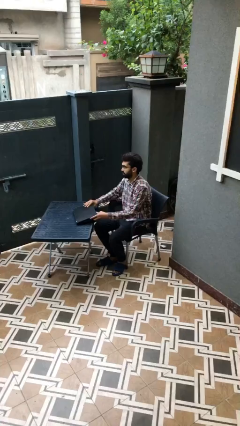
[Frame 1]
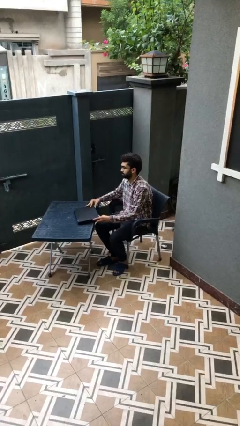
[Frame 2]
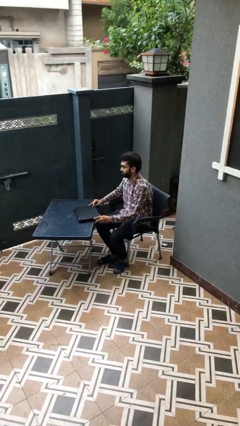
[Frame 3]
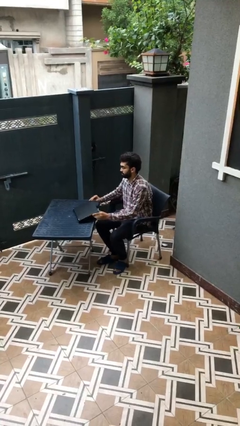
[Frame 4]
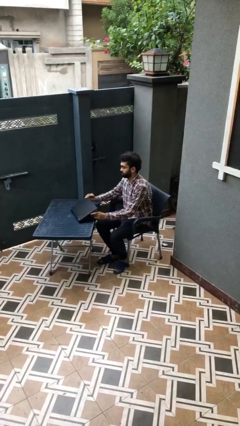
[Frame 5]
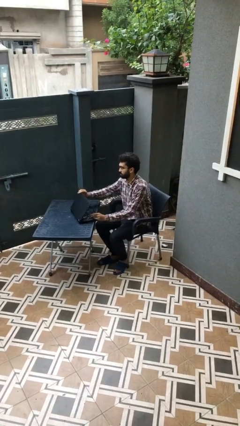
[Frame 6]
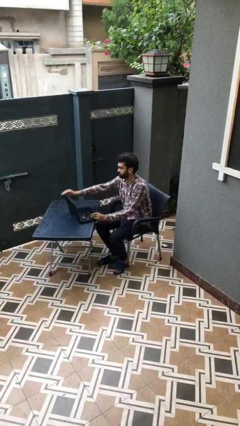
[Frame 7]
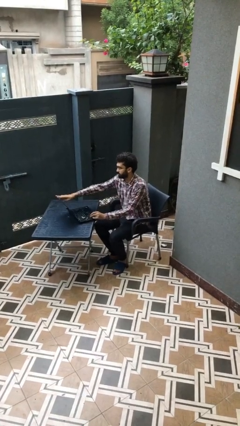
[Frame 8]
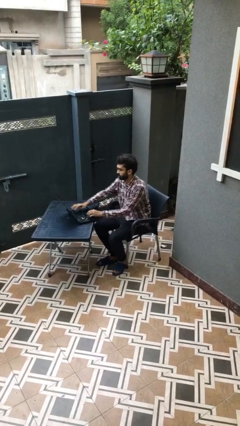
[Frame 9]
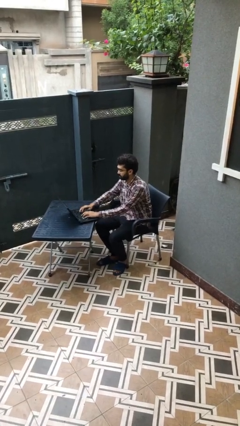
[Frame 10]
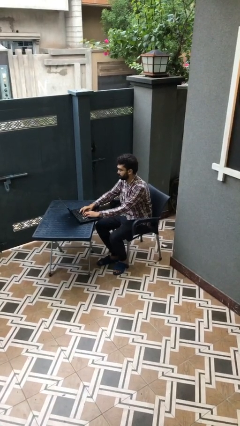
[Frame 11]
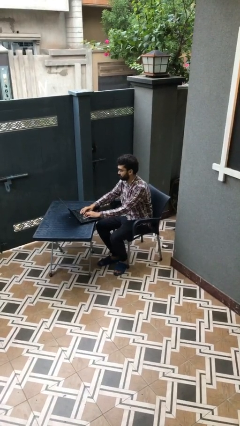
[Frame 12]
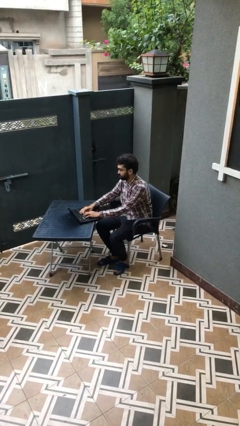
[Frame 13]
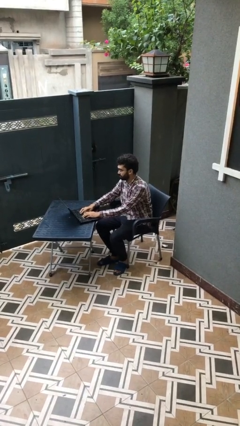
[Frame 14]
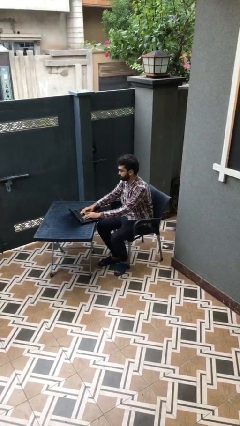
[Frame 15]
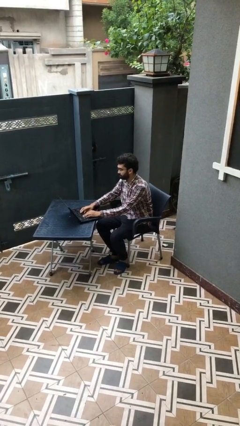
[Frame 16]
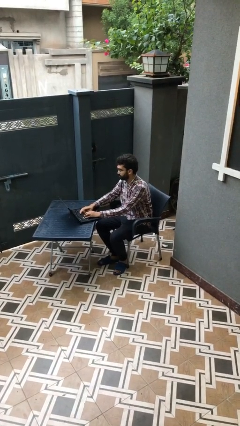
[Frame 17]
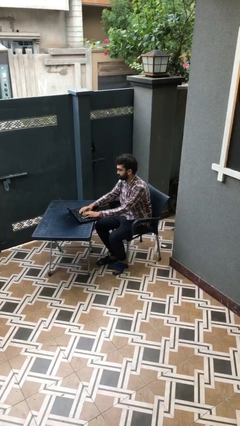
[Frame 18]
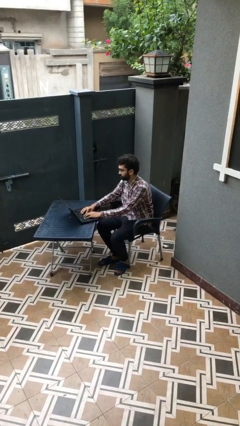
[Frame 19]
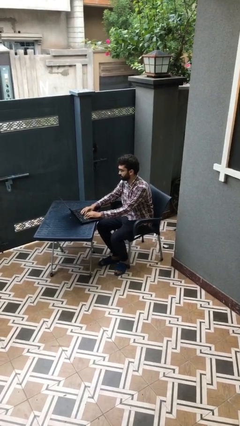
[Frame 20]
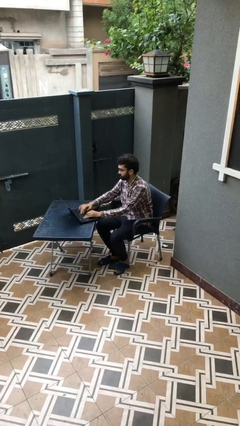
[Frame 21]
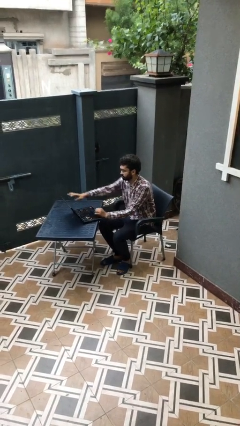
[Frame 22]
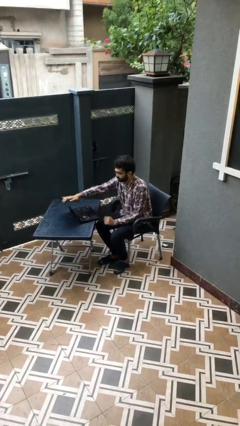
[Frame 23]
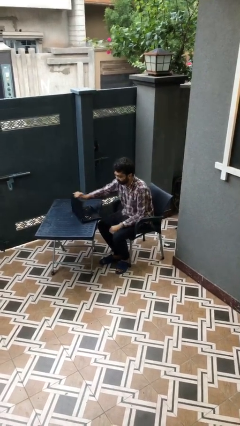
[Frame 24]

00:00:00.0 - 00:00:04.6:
person interacts with laptop

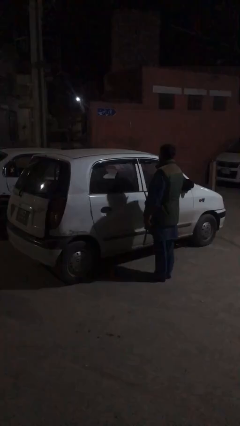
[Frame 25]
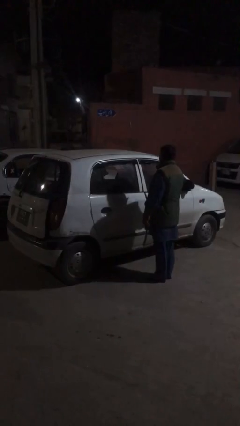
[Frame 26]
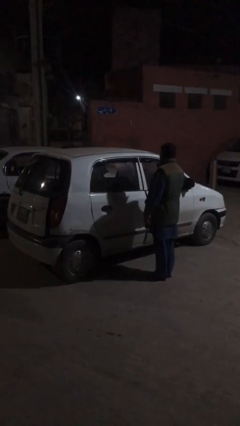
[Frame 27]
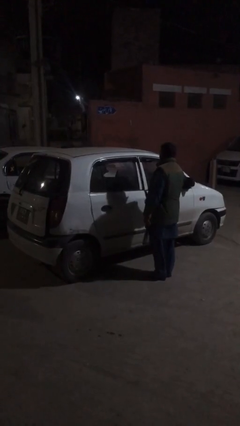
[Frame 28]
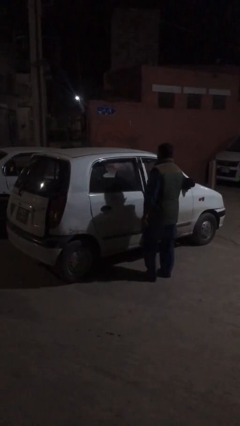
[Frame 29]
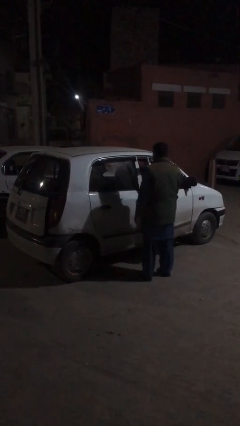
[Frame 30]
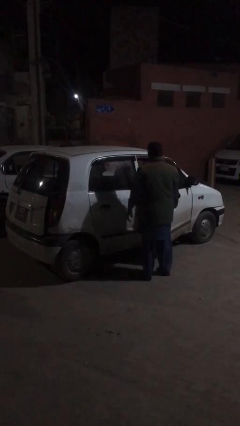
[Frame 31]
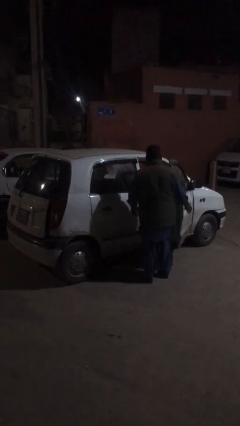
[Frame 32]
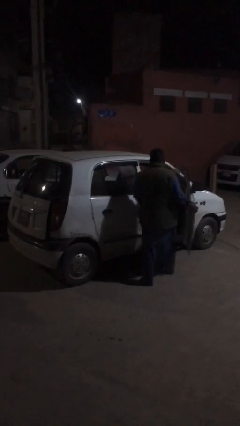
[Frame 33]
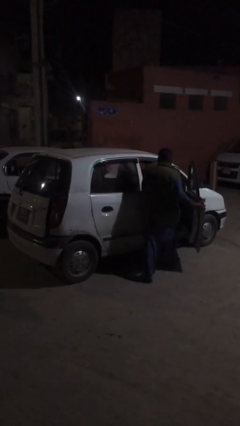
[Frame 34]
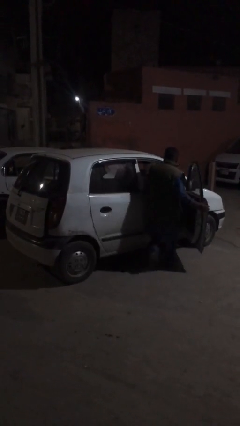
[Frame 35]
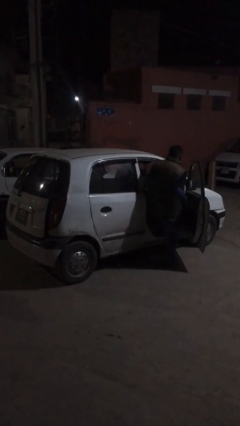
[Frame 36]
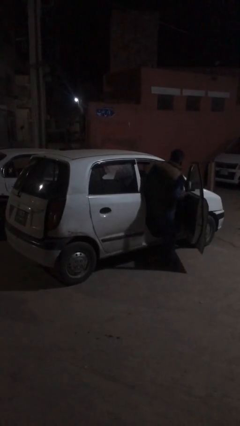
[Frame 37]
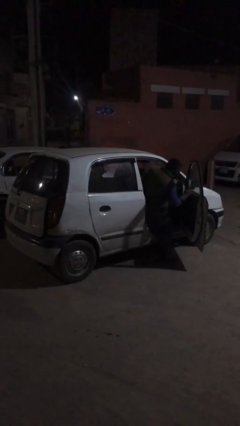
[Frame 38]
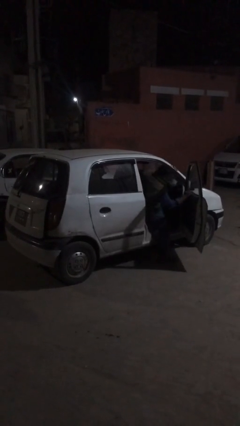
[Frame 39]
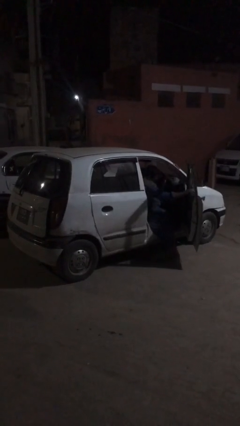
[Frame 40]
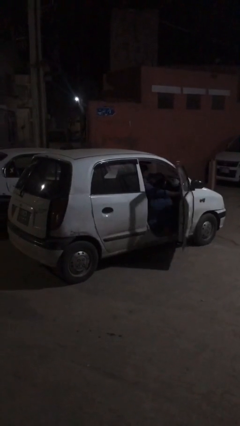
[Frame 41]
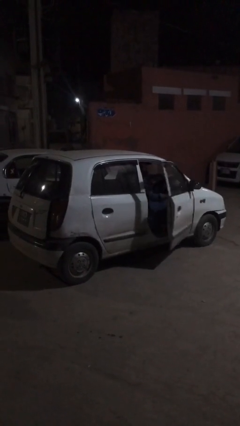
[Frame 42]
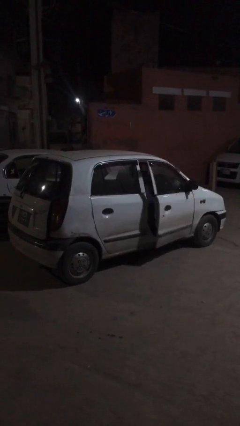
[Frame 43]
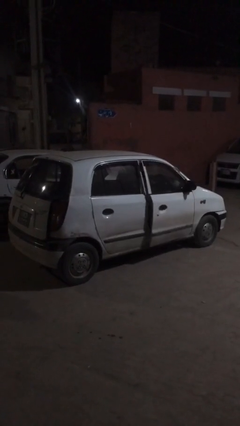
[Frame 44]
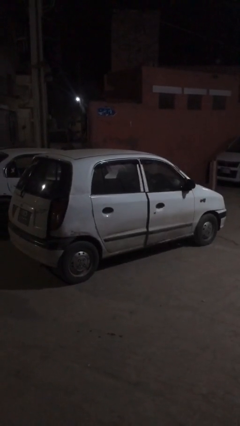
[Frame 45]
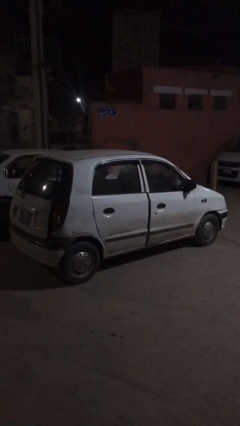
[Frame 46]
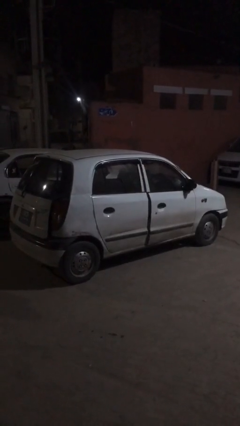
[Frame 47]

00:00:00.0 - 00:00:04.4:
car picks up person

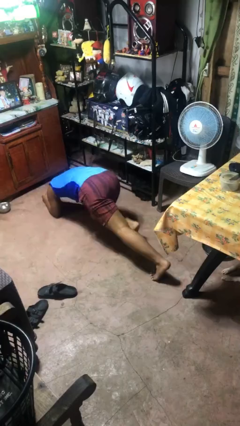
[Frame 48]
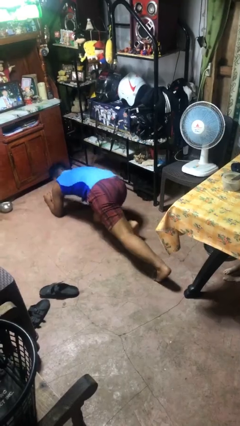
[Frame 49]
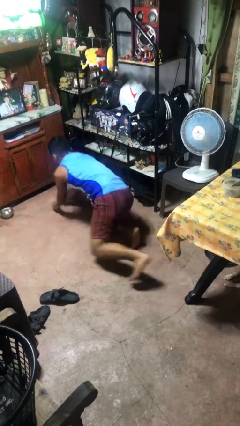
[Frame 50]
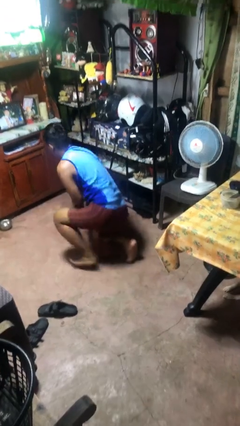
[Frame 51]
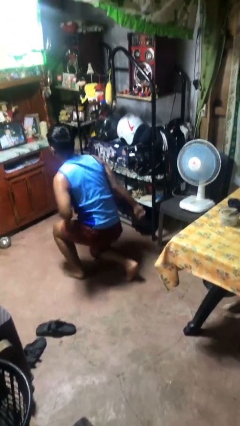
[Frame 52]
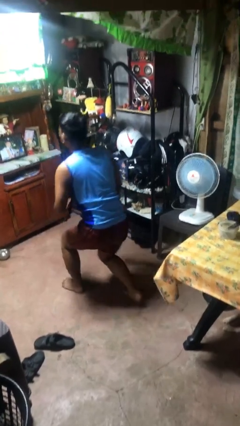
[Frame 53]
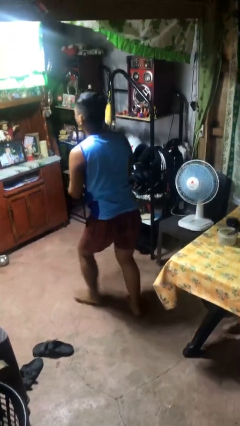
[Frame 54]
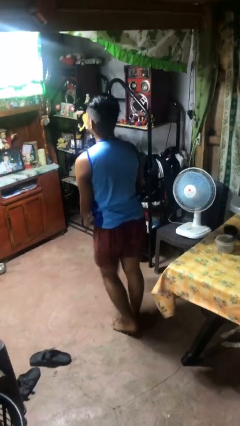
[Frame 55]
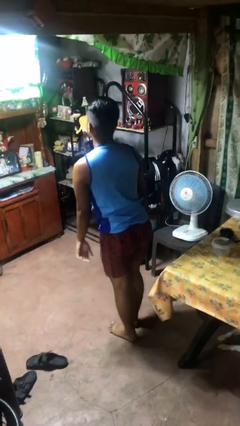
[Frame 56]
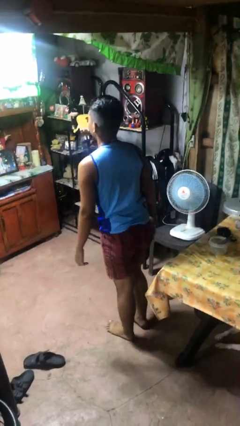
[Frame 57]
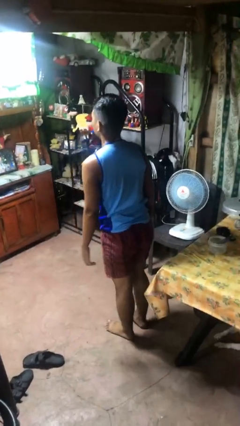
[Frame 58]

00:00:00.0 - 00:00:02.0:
person stands up from floor

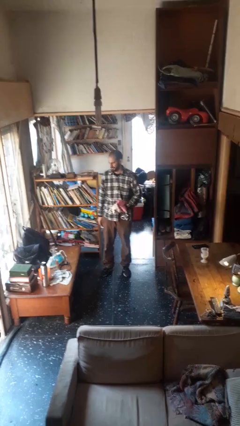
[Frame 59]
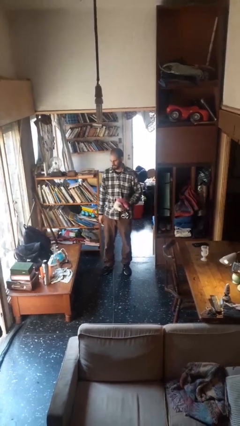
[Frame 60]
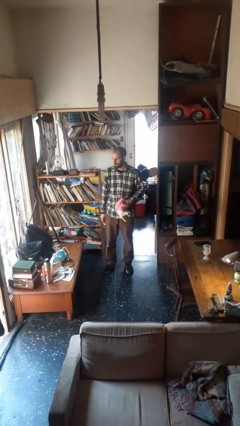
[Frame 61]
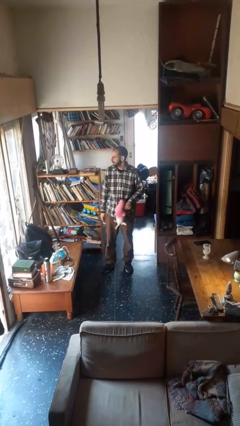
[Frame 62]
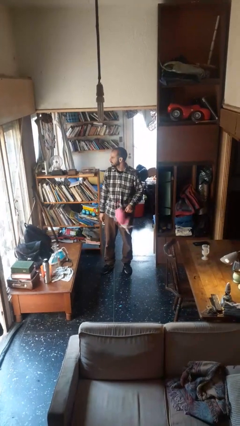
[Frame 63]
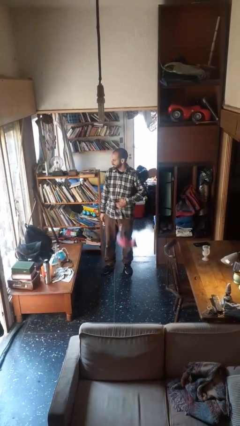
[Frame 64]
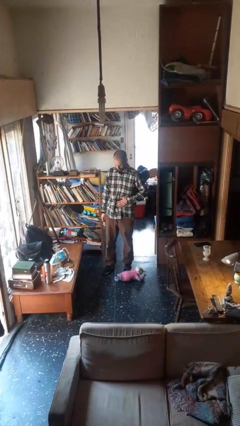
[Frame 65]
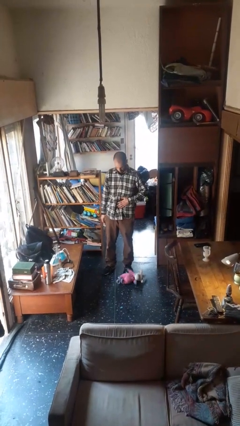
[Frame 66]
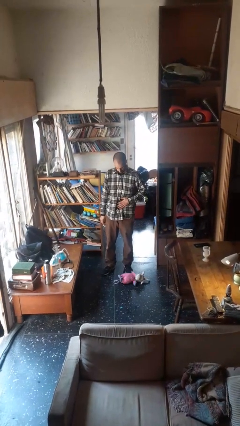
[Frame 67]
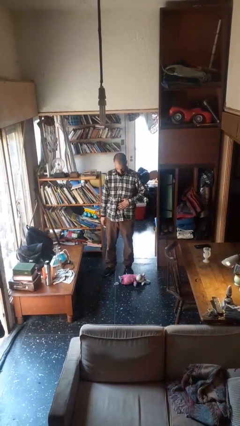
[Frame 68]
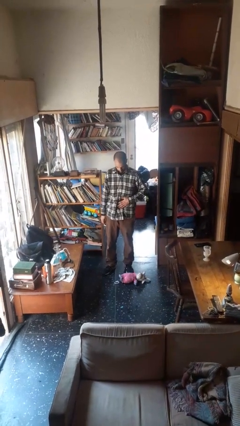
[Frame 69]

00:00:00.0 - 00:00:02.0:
person drops object

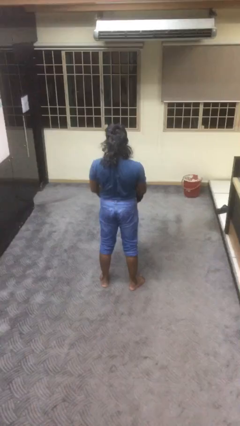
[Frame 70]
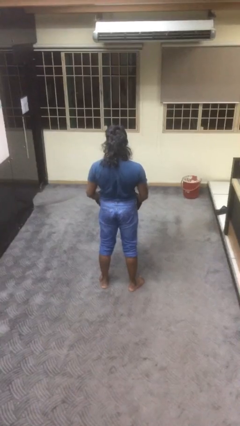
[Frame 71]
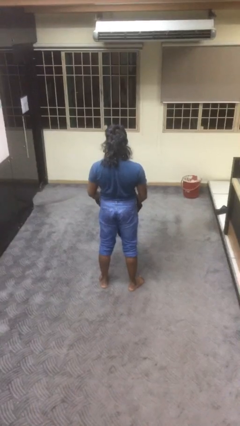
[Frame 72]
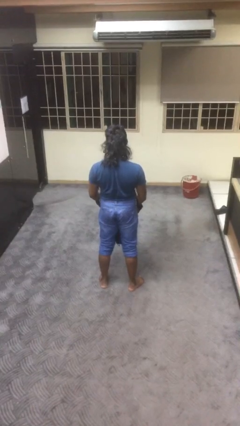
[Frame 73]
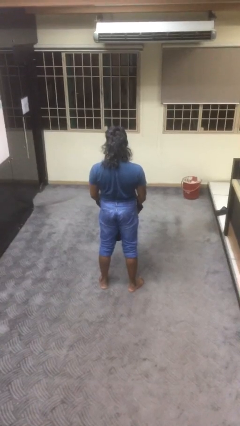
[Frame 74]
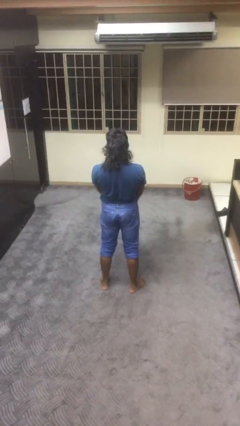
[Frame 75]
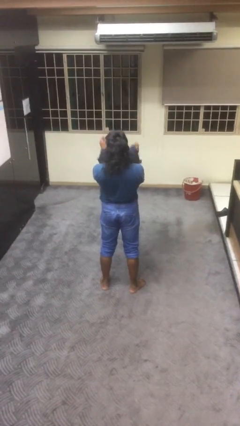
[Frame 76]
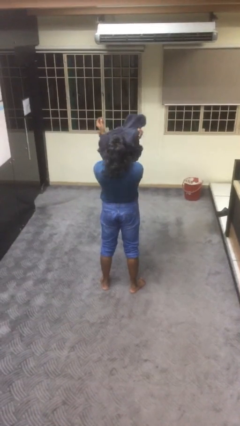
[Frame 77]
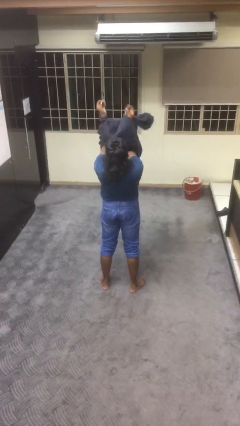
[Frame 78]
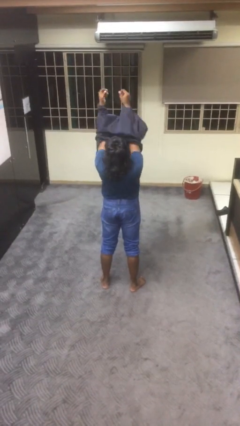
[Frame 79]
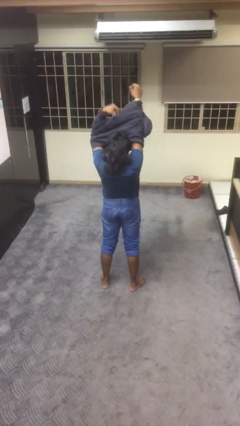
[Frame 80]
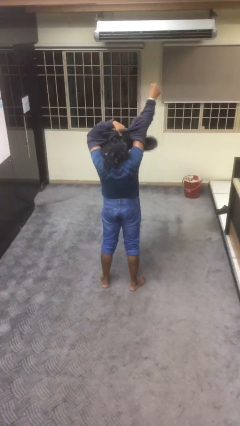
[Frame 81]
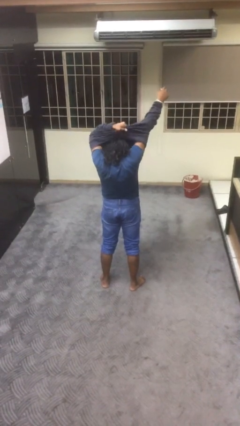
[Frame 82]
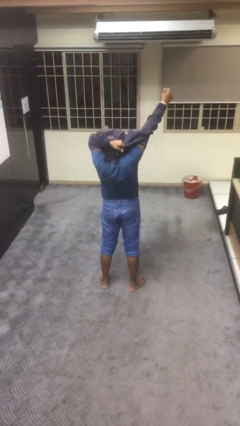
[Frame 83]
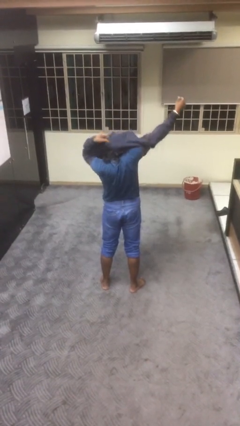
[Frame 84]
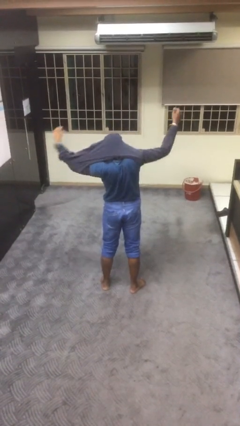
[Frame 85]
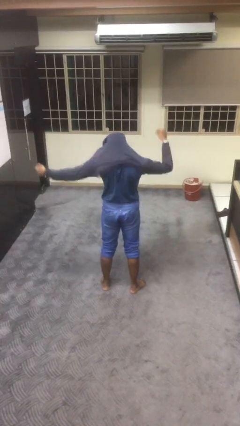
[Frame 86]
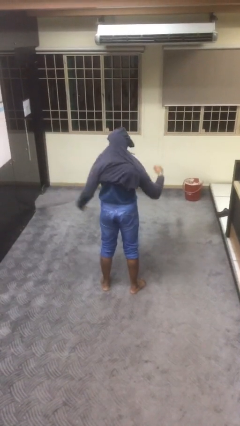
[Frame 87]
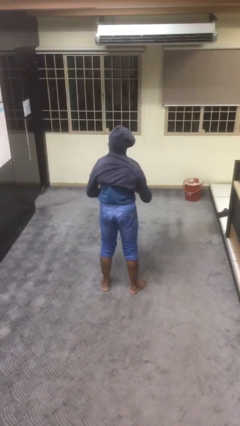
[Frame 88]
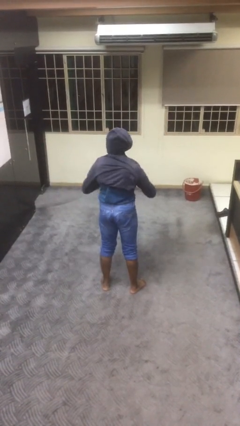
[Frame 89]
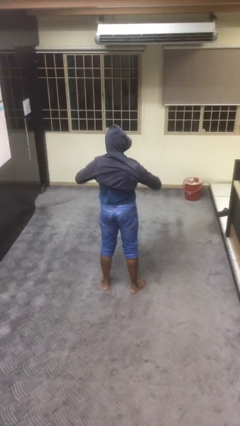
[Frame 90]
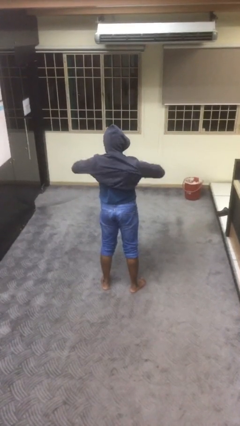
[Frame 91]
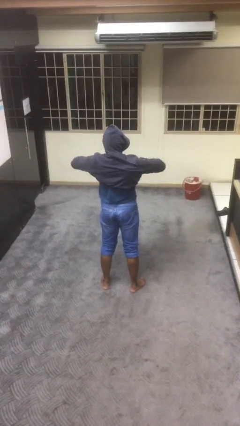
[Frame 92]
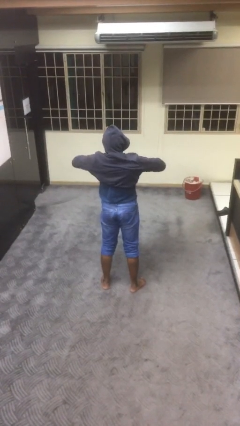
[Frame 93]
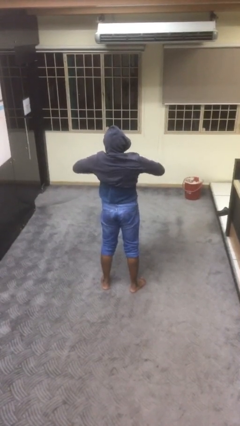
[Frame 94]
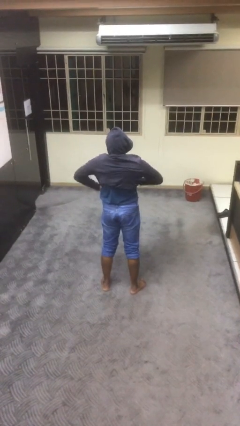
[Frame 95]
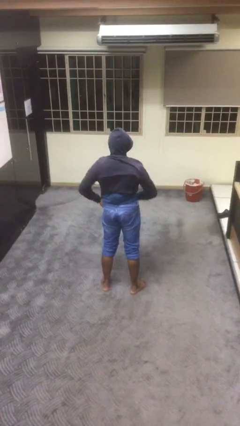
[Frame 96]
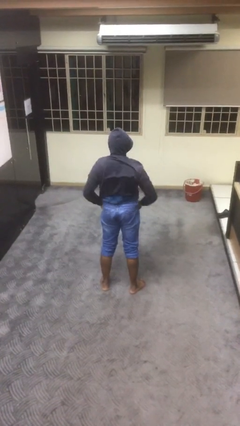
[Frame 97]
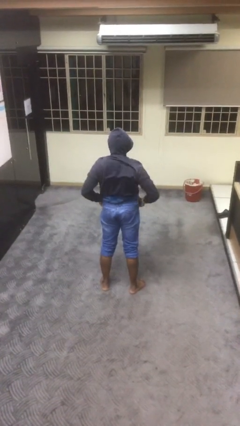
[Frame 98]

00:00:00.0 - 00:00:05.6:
person puts on hoodie
